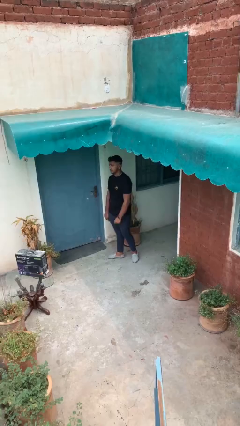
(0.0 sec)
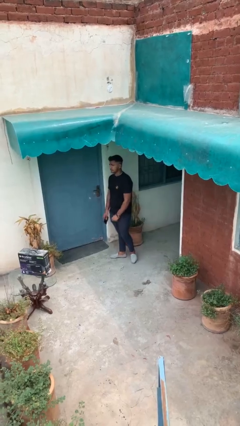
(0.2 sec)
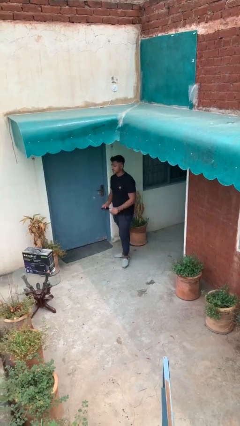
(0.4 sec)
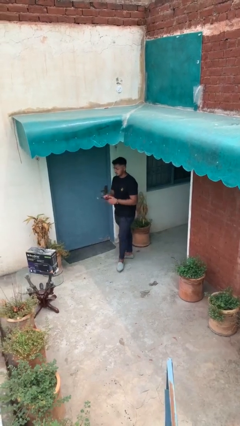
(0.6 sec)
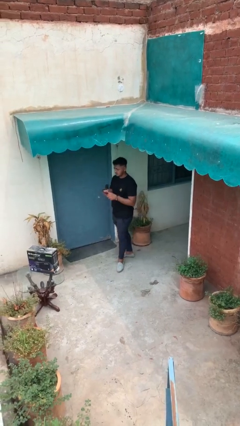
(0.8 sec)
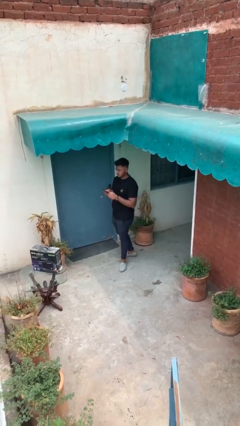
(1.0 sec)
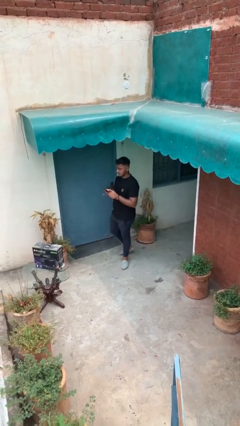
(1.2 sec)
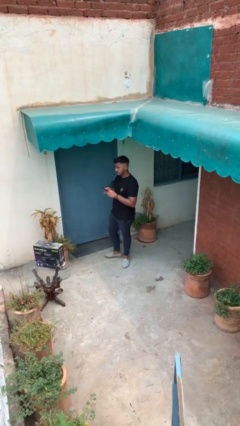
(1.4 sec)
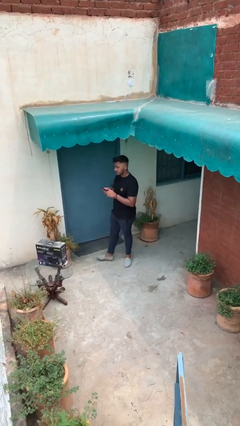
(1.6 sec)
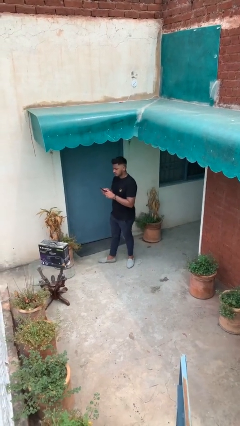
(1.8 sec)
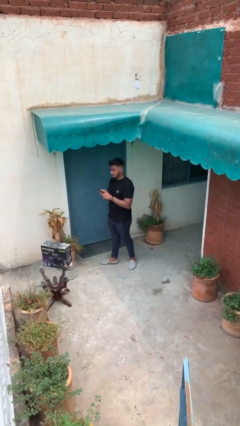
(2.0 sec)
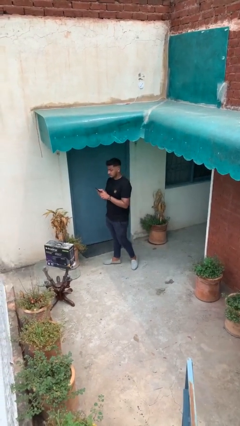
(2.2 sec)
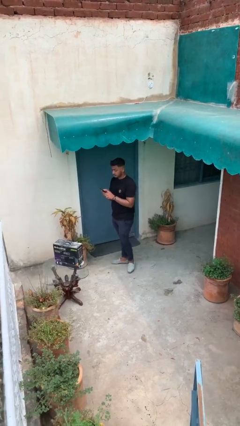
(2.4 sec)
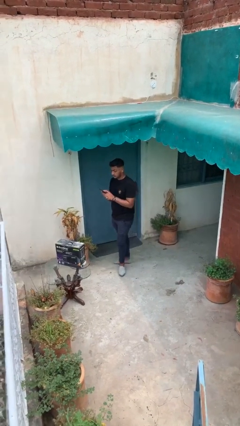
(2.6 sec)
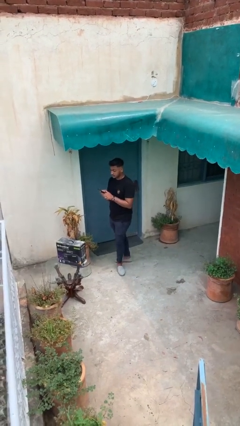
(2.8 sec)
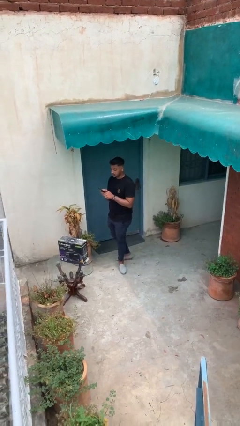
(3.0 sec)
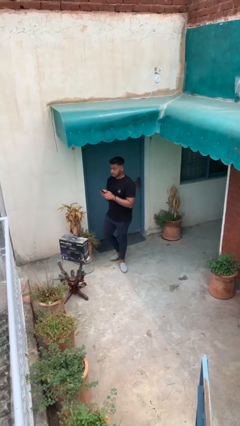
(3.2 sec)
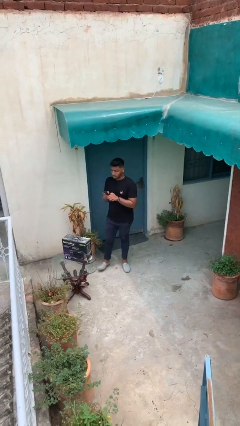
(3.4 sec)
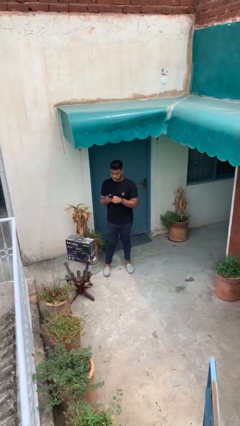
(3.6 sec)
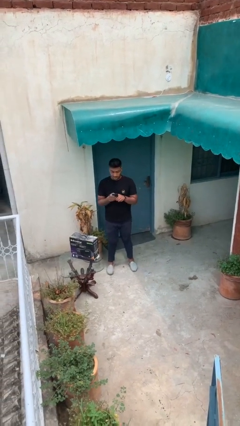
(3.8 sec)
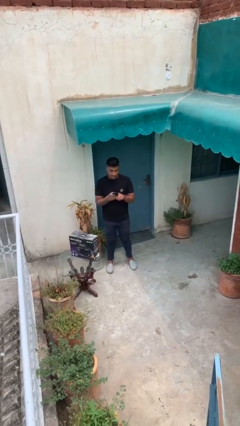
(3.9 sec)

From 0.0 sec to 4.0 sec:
person texts on phone

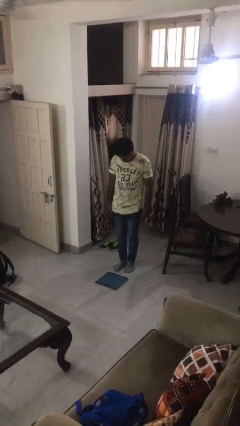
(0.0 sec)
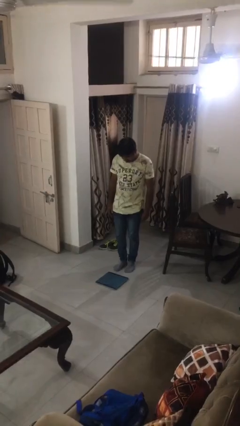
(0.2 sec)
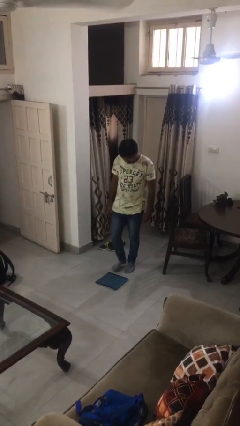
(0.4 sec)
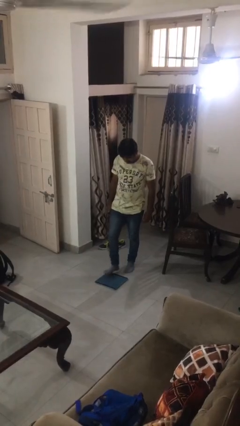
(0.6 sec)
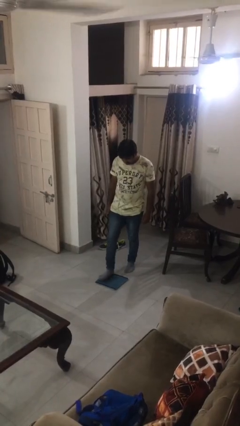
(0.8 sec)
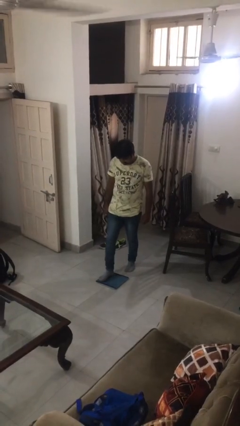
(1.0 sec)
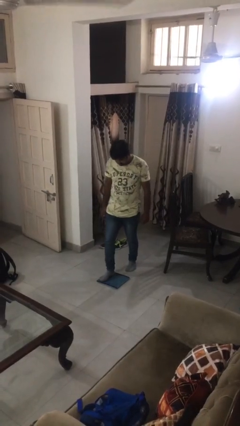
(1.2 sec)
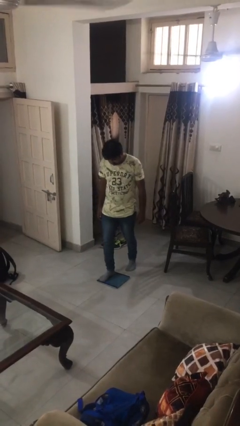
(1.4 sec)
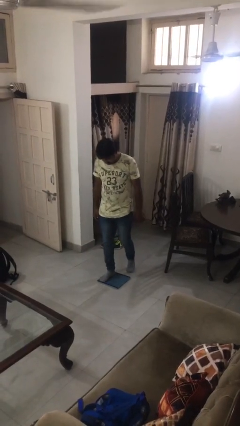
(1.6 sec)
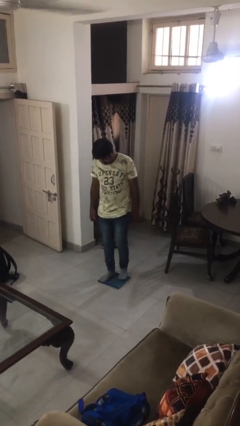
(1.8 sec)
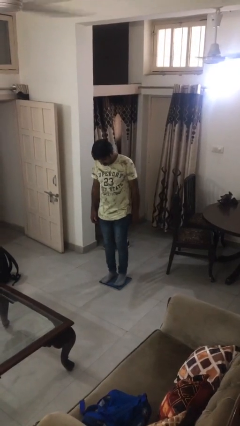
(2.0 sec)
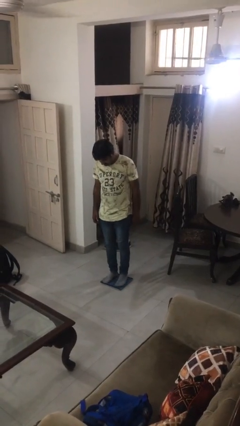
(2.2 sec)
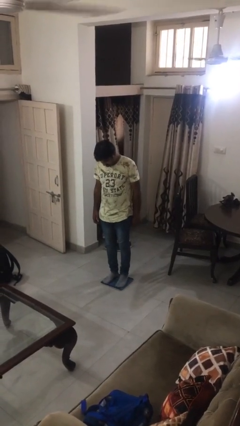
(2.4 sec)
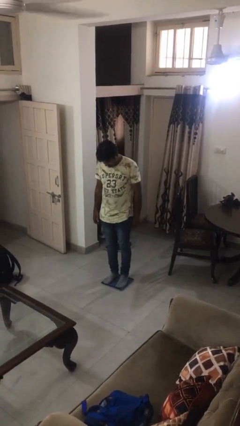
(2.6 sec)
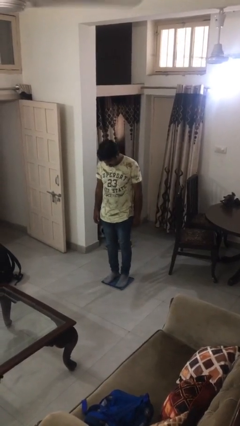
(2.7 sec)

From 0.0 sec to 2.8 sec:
person uses bodyweight scale

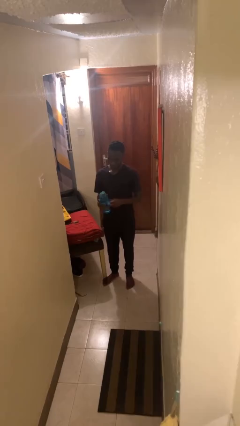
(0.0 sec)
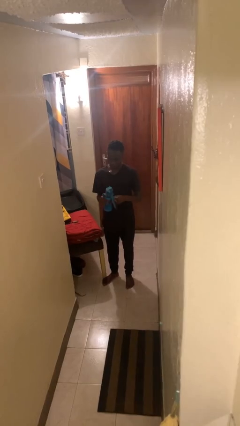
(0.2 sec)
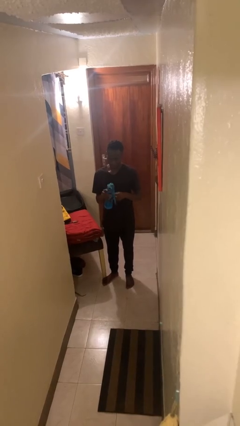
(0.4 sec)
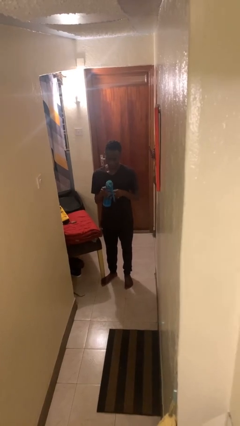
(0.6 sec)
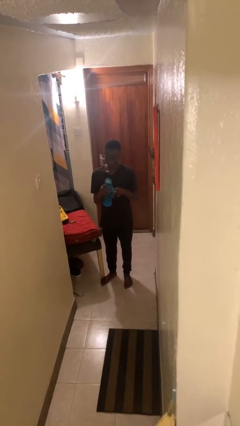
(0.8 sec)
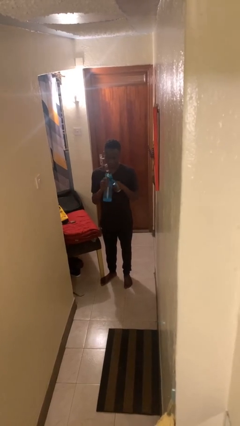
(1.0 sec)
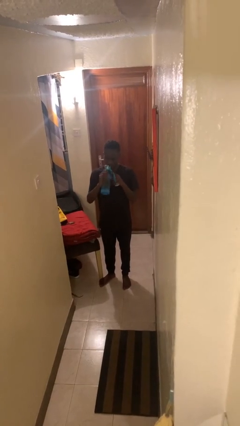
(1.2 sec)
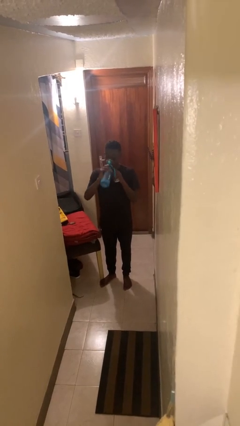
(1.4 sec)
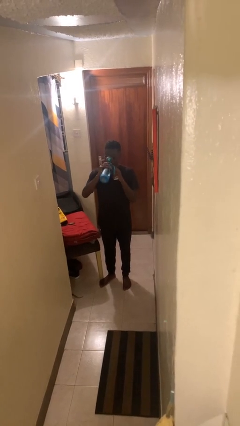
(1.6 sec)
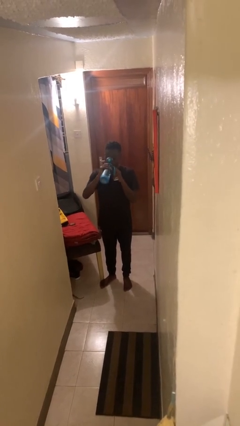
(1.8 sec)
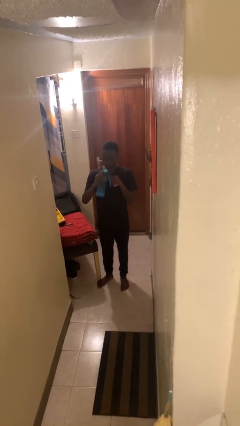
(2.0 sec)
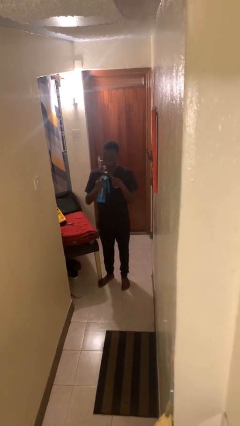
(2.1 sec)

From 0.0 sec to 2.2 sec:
person drinks from cup

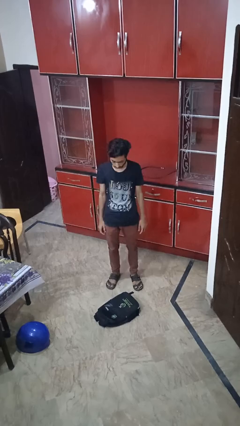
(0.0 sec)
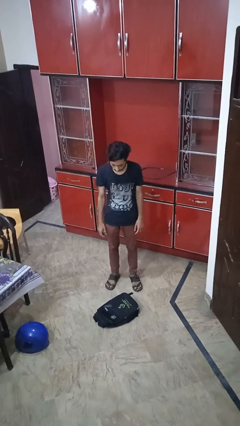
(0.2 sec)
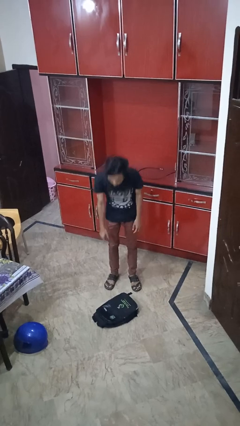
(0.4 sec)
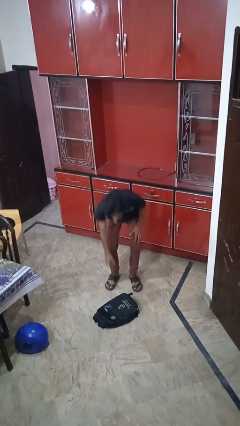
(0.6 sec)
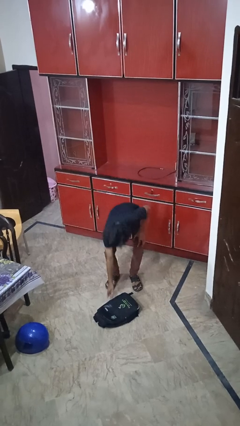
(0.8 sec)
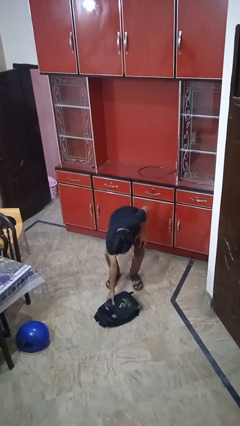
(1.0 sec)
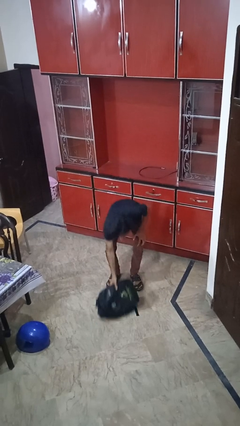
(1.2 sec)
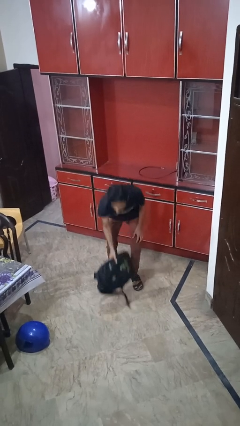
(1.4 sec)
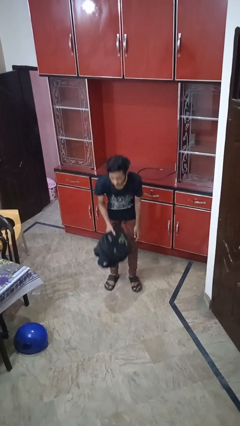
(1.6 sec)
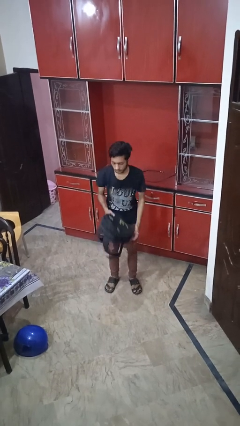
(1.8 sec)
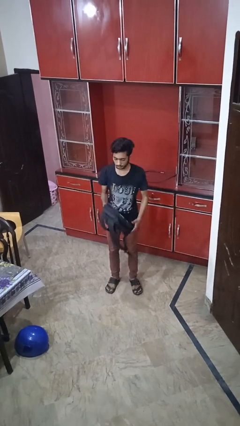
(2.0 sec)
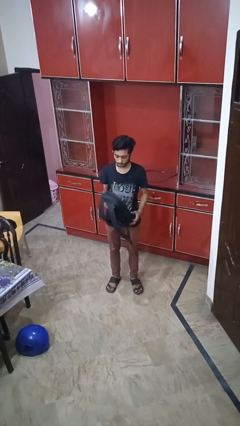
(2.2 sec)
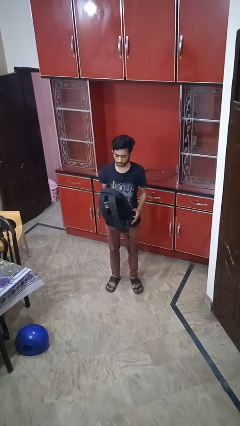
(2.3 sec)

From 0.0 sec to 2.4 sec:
person picks up object from floor

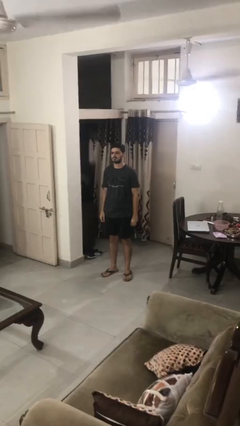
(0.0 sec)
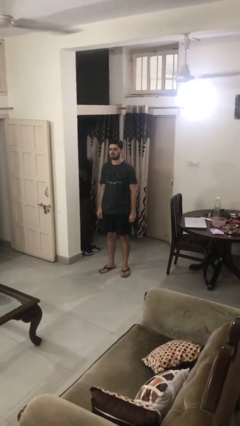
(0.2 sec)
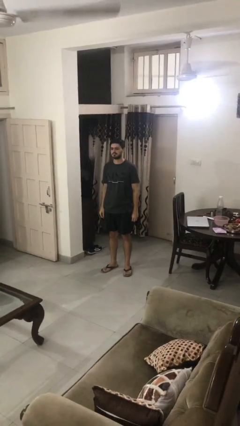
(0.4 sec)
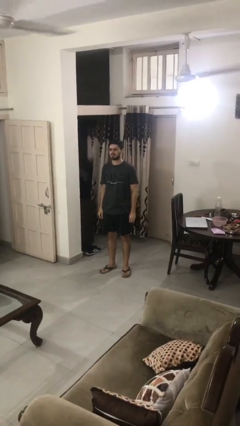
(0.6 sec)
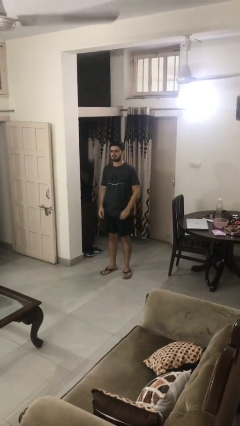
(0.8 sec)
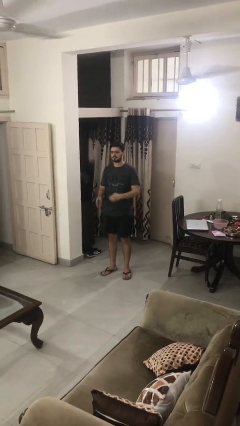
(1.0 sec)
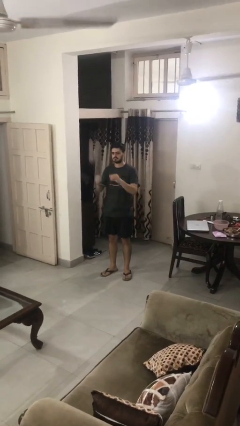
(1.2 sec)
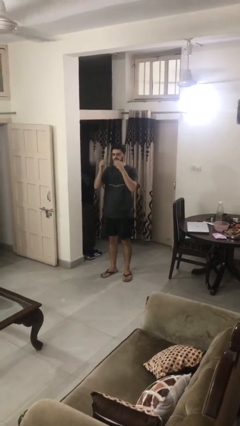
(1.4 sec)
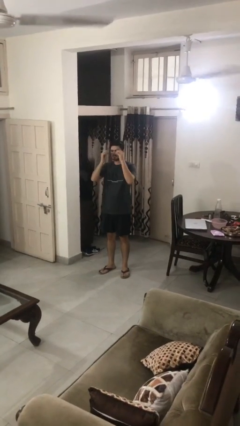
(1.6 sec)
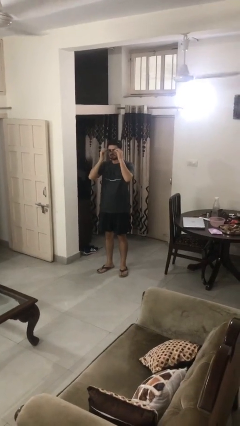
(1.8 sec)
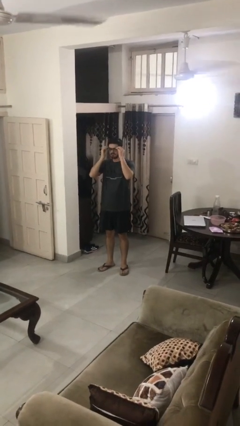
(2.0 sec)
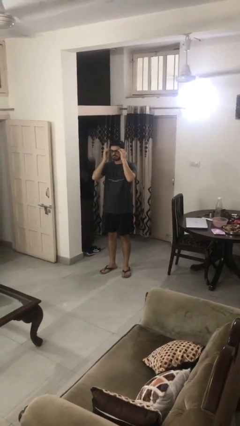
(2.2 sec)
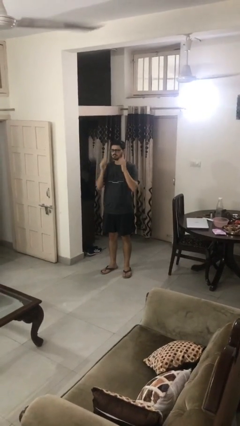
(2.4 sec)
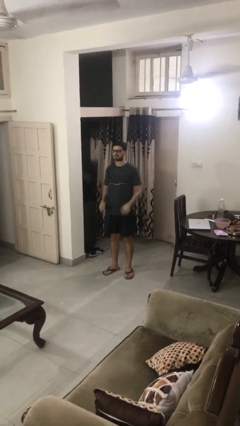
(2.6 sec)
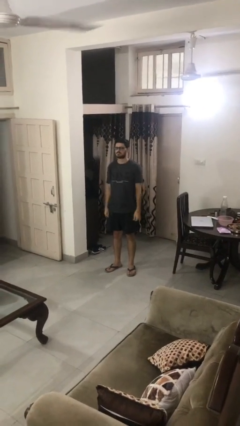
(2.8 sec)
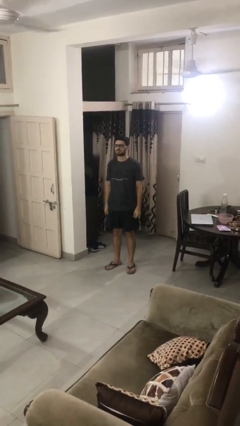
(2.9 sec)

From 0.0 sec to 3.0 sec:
person puts on glasses

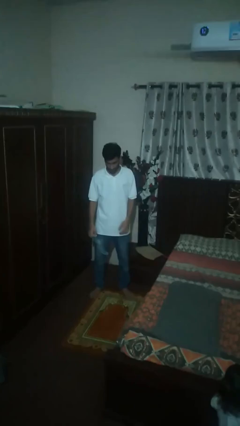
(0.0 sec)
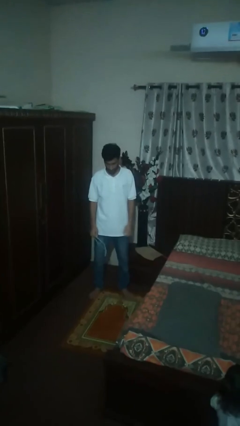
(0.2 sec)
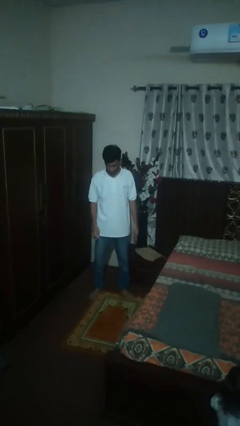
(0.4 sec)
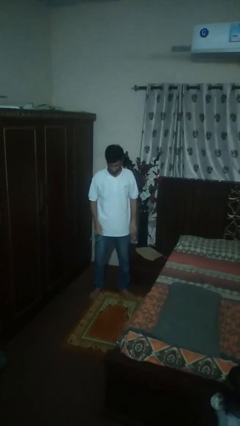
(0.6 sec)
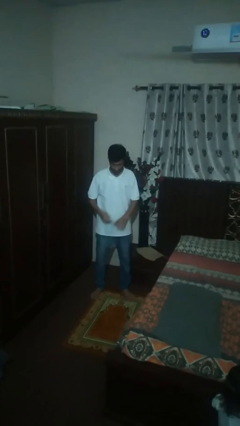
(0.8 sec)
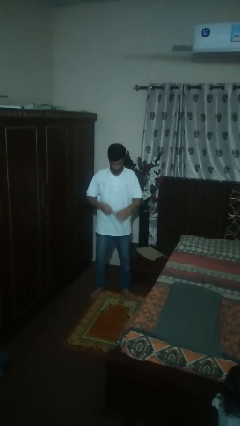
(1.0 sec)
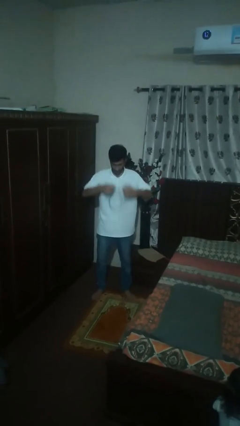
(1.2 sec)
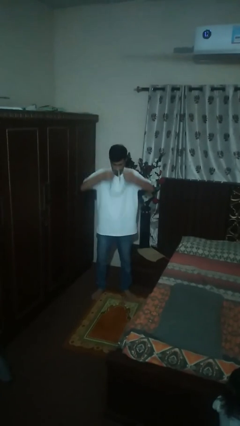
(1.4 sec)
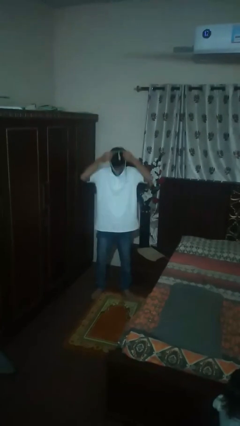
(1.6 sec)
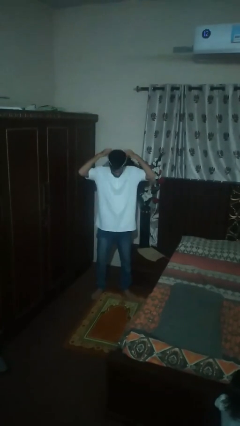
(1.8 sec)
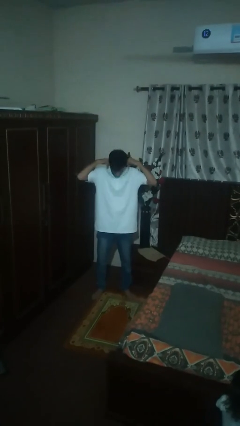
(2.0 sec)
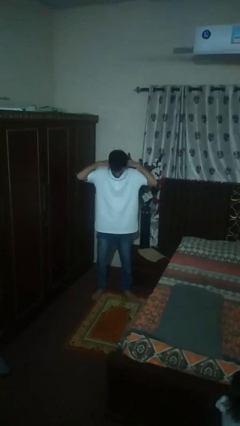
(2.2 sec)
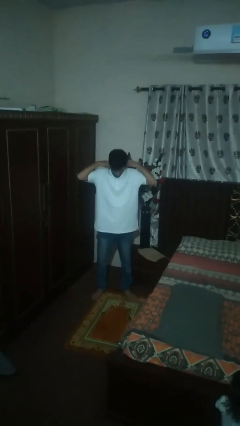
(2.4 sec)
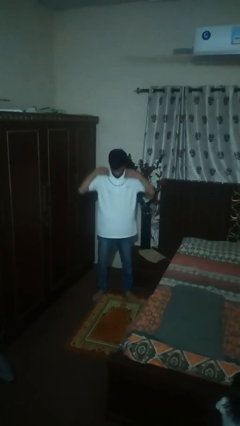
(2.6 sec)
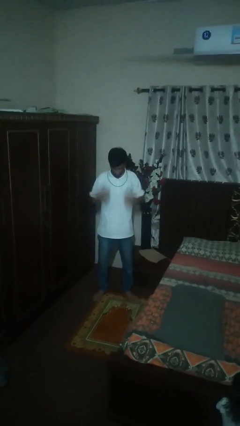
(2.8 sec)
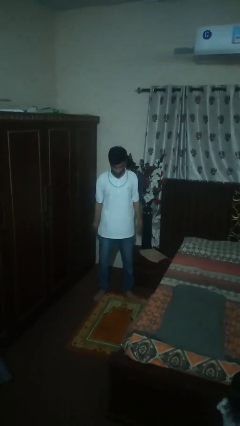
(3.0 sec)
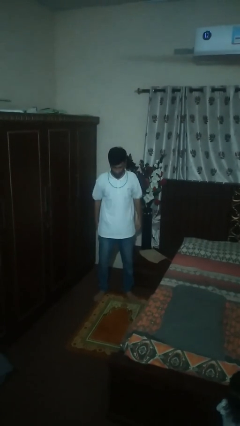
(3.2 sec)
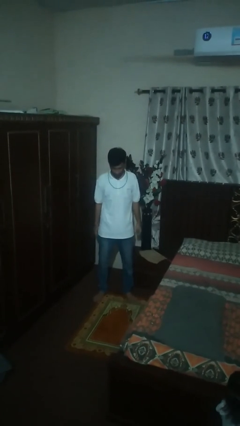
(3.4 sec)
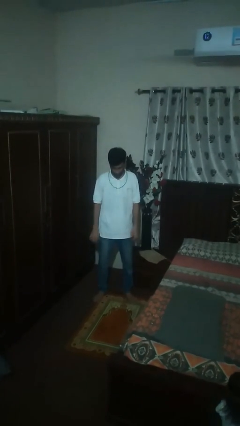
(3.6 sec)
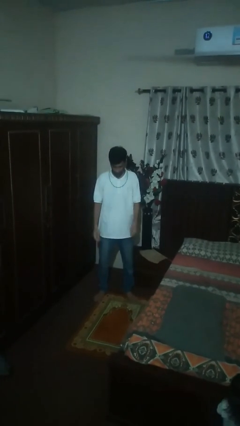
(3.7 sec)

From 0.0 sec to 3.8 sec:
person puts on necklace
